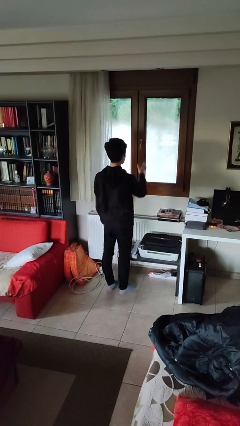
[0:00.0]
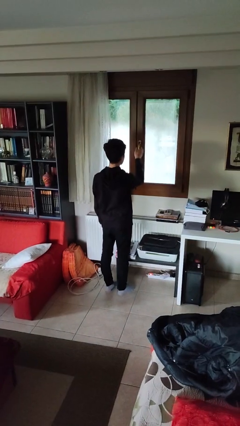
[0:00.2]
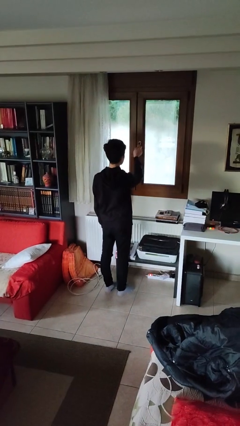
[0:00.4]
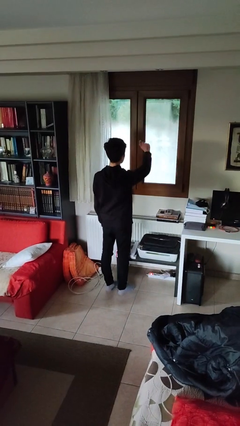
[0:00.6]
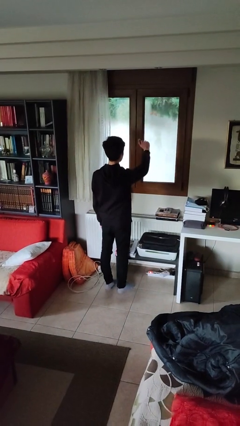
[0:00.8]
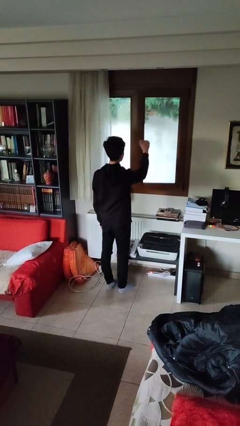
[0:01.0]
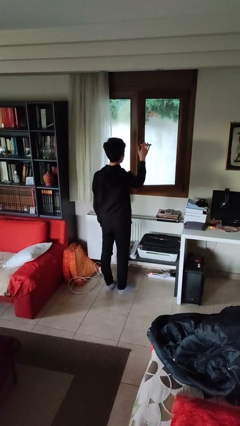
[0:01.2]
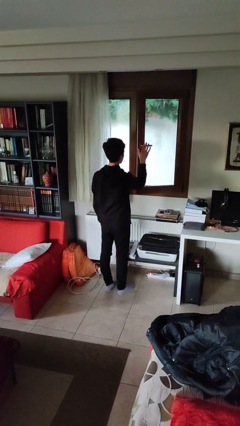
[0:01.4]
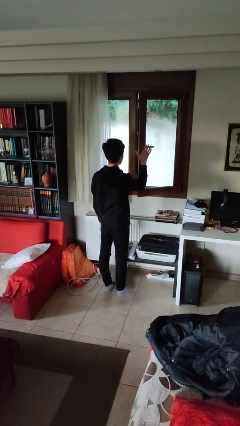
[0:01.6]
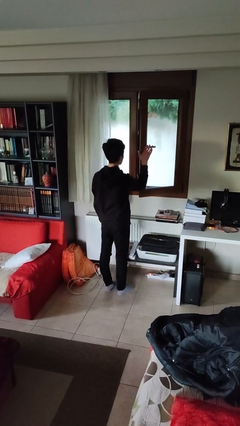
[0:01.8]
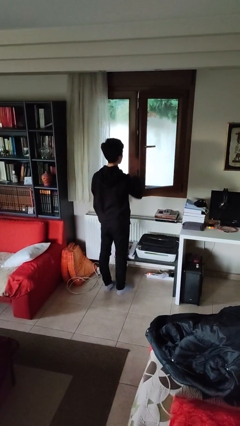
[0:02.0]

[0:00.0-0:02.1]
person opens home window

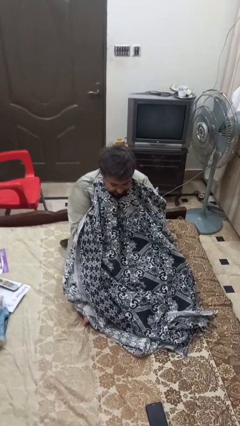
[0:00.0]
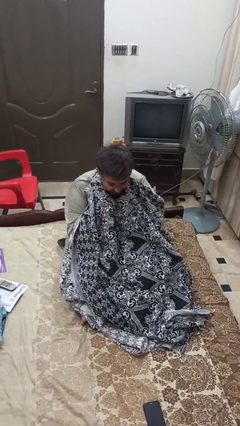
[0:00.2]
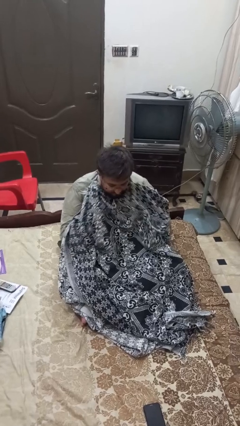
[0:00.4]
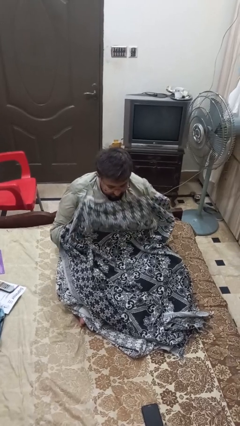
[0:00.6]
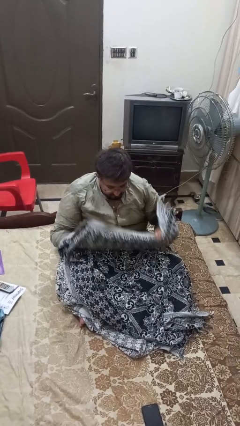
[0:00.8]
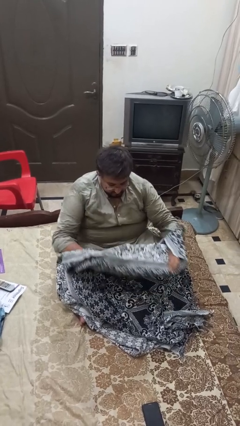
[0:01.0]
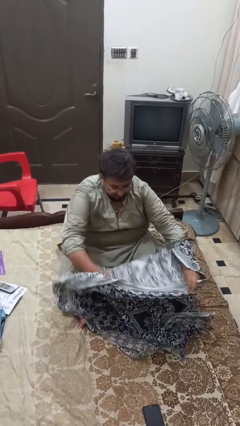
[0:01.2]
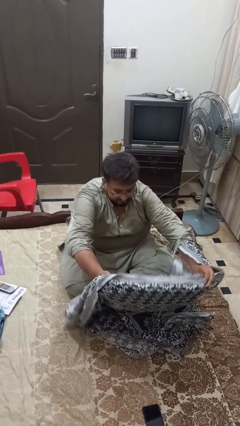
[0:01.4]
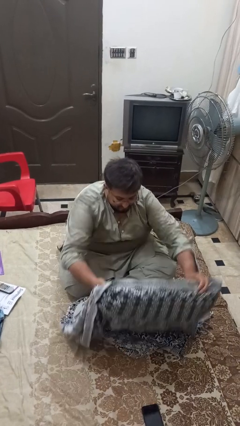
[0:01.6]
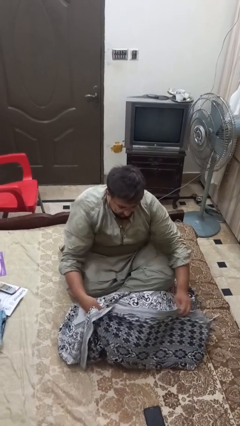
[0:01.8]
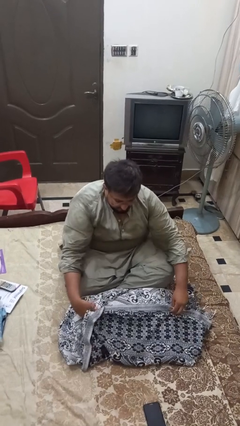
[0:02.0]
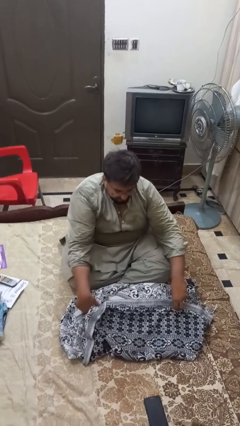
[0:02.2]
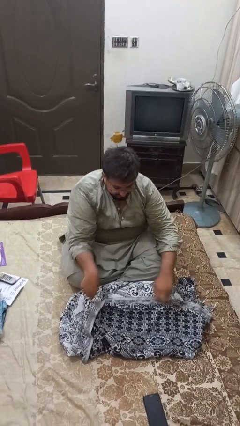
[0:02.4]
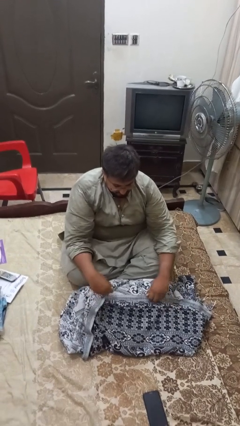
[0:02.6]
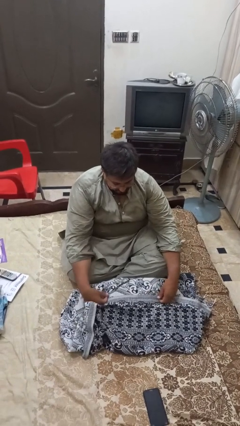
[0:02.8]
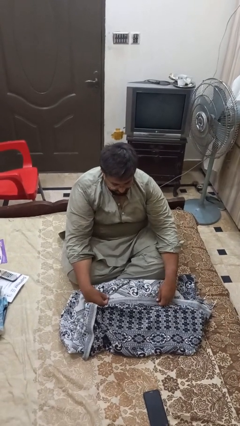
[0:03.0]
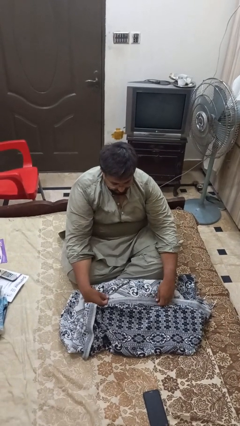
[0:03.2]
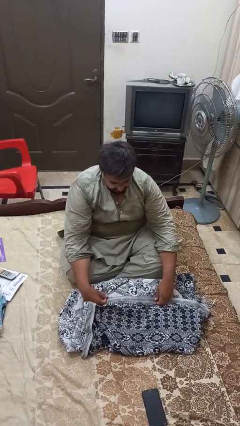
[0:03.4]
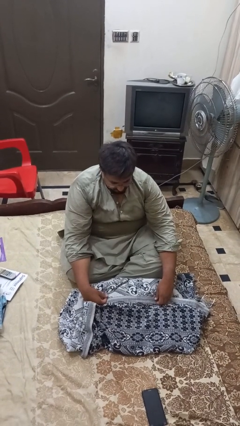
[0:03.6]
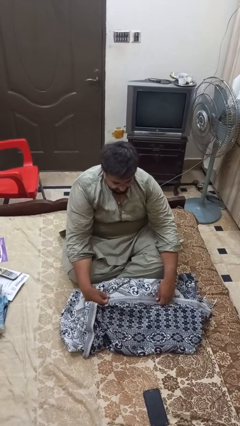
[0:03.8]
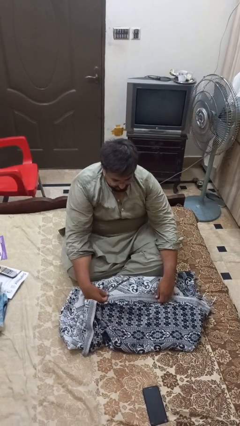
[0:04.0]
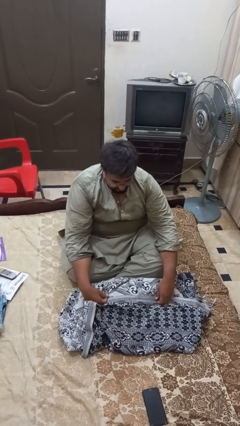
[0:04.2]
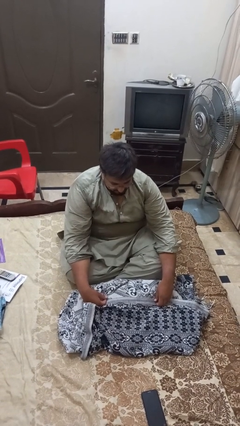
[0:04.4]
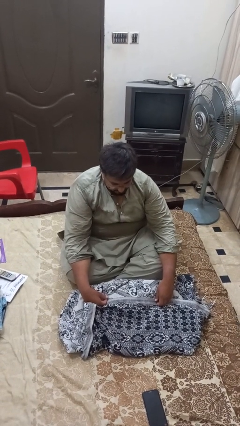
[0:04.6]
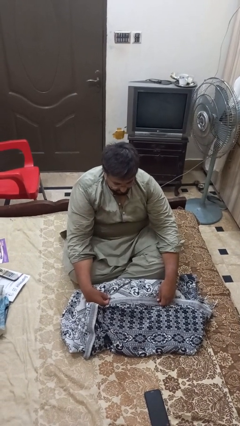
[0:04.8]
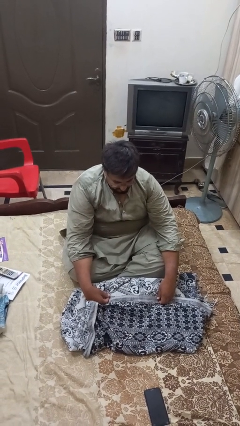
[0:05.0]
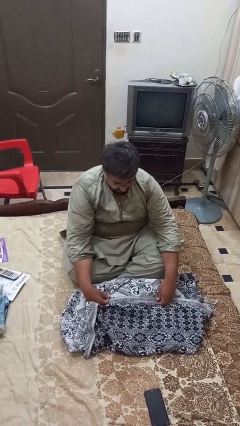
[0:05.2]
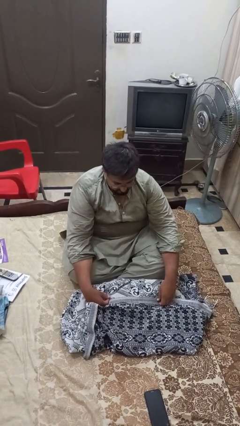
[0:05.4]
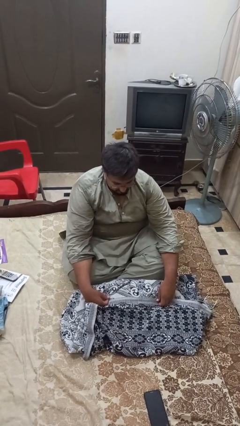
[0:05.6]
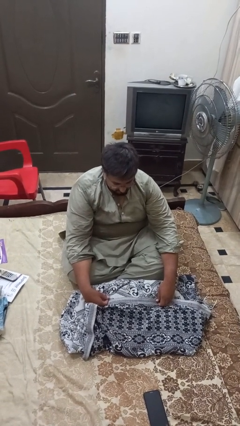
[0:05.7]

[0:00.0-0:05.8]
person uncovers with blanket

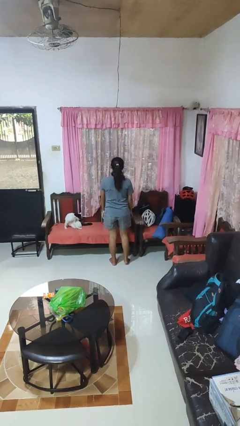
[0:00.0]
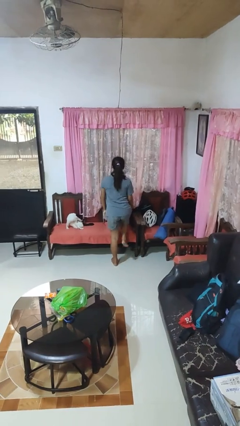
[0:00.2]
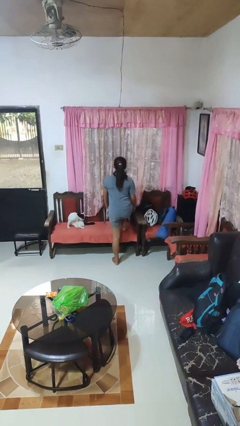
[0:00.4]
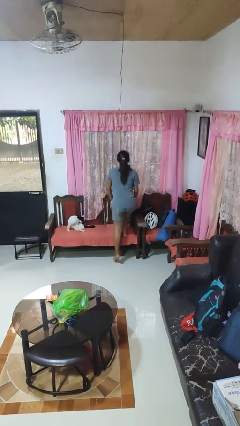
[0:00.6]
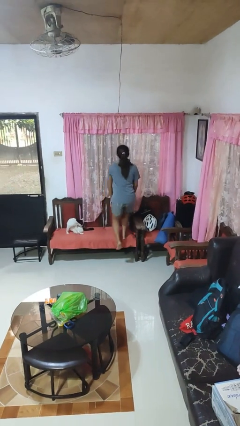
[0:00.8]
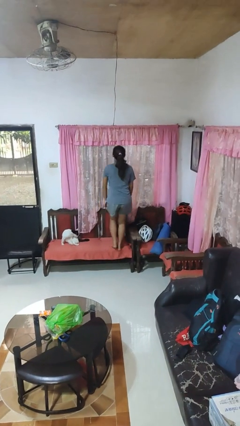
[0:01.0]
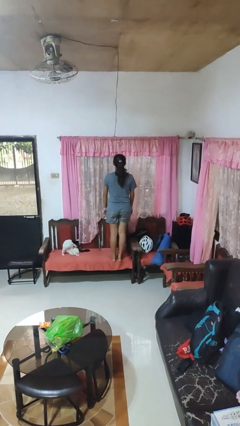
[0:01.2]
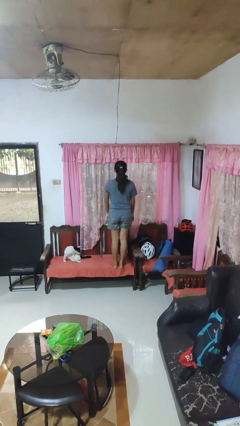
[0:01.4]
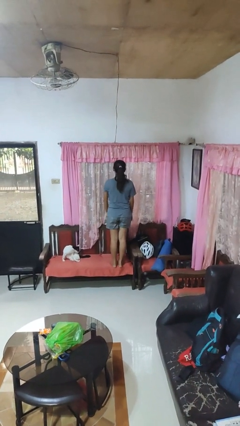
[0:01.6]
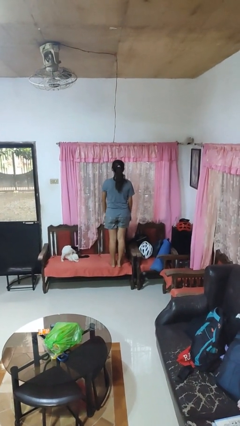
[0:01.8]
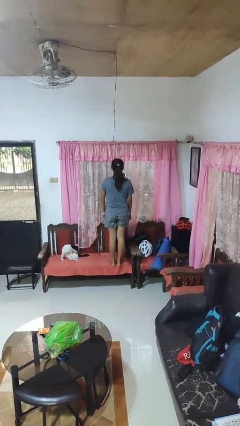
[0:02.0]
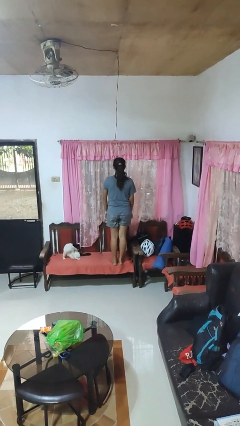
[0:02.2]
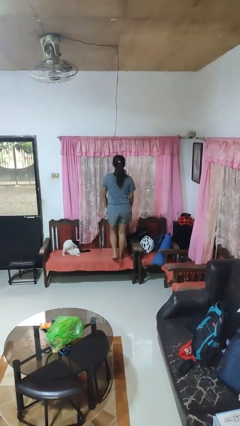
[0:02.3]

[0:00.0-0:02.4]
person climbs on chair

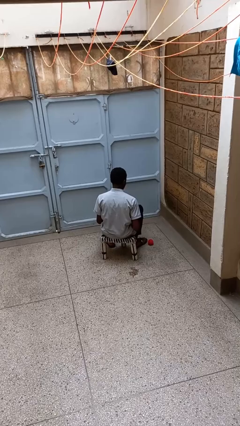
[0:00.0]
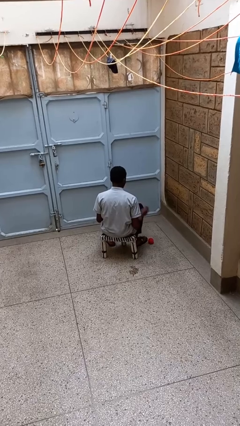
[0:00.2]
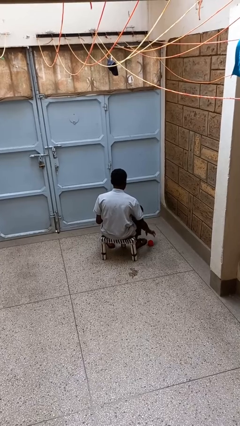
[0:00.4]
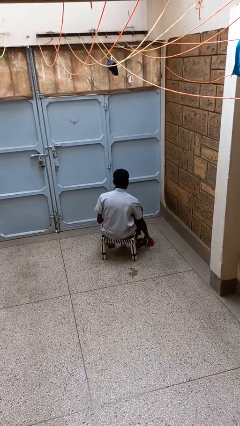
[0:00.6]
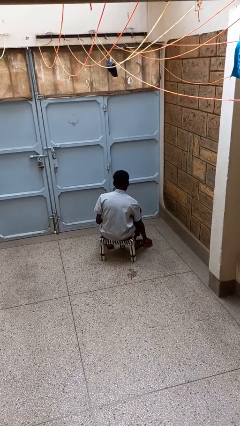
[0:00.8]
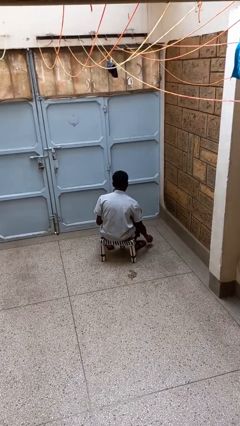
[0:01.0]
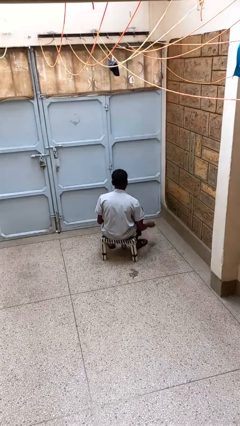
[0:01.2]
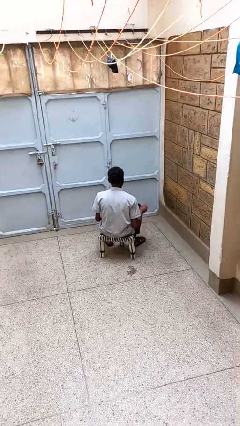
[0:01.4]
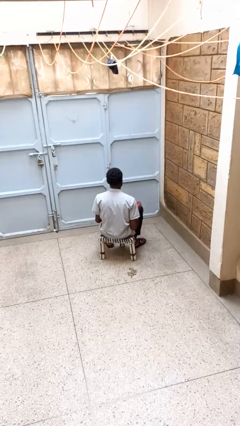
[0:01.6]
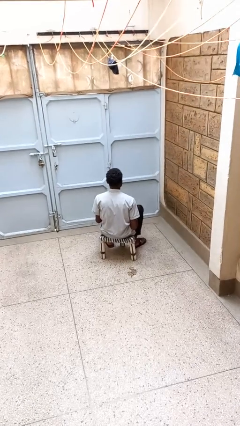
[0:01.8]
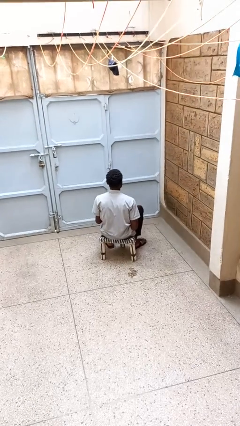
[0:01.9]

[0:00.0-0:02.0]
person picks up object from floor

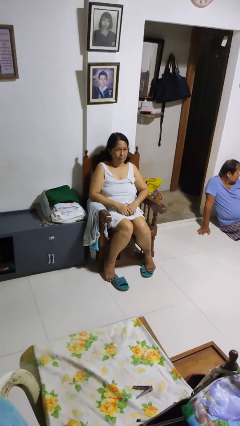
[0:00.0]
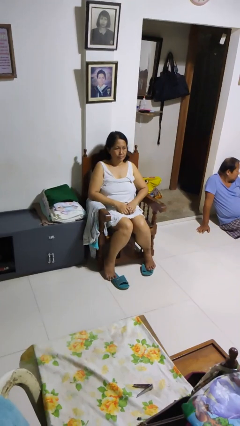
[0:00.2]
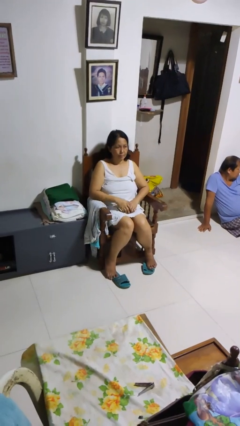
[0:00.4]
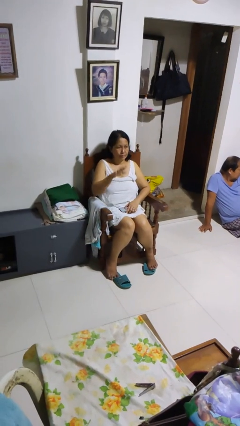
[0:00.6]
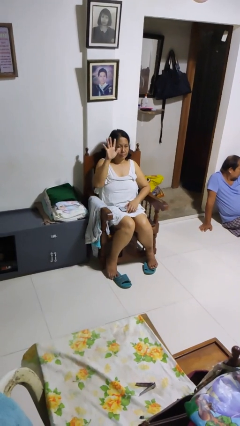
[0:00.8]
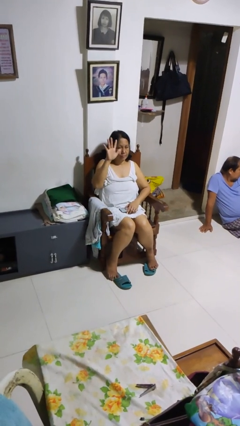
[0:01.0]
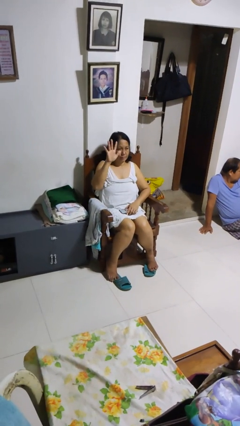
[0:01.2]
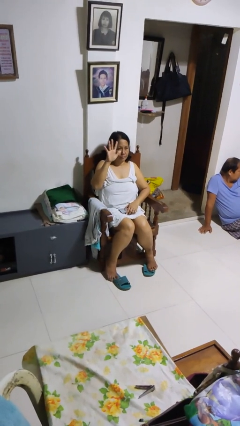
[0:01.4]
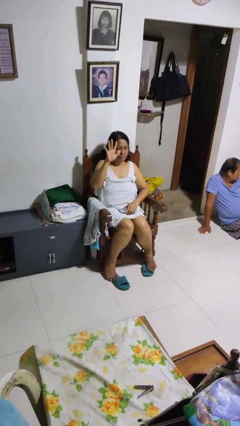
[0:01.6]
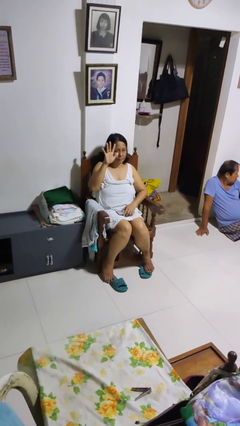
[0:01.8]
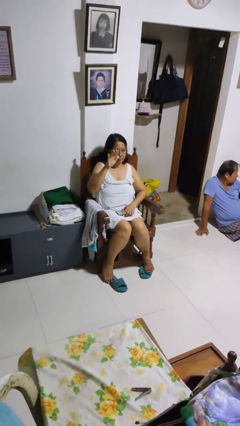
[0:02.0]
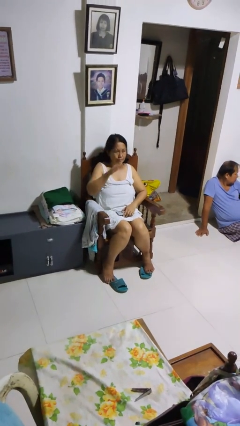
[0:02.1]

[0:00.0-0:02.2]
person gestures number five

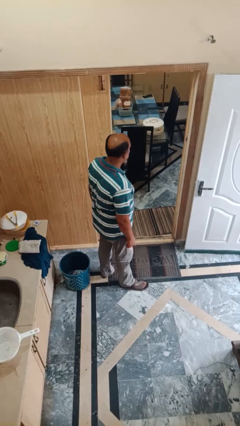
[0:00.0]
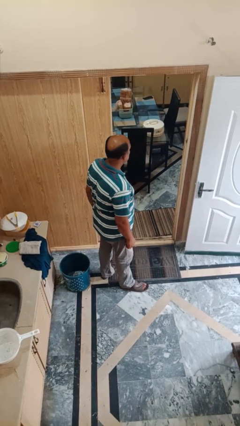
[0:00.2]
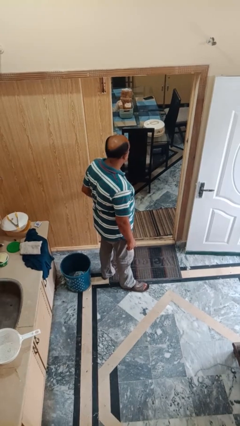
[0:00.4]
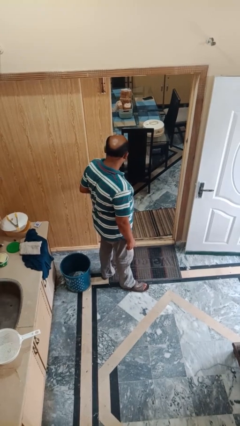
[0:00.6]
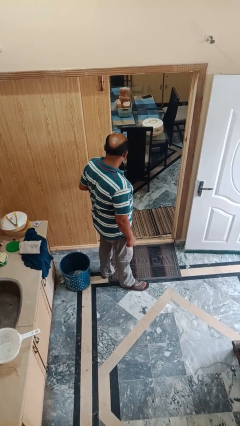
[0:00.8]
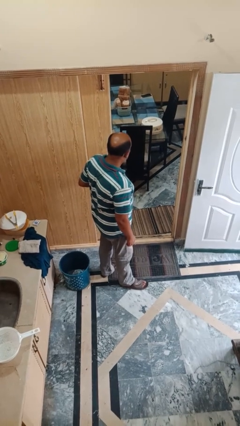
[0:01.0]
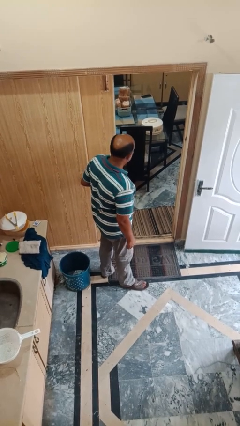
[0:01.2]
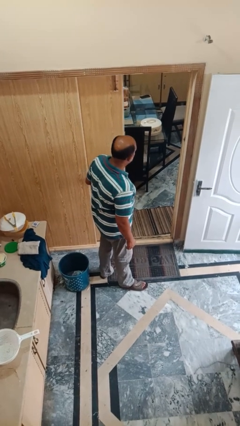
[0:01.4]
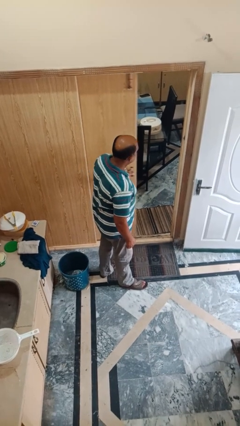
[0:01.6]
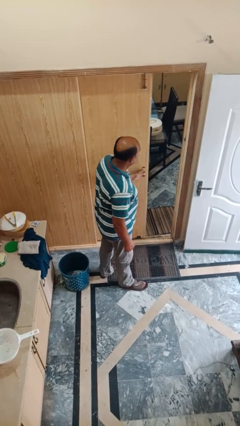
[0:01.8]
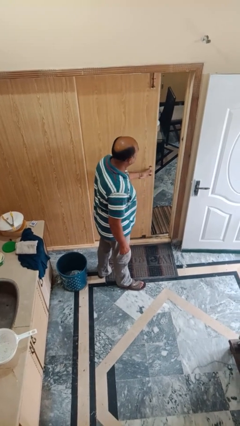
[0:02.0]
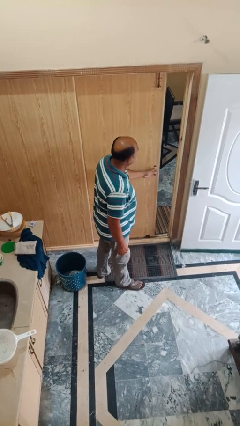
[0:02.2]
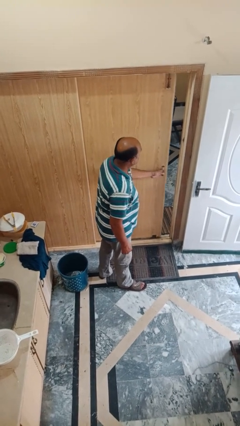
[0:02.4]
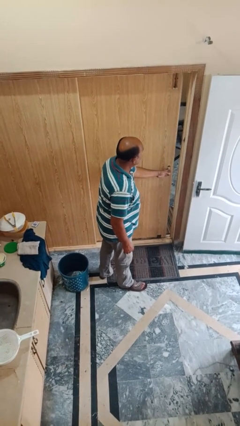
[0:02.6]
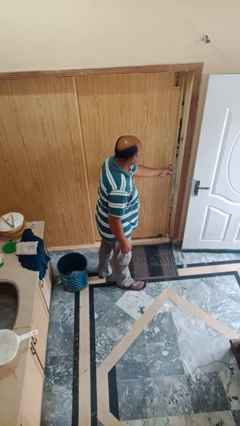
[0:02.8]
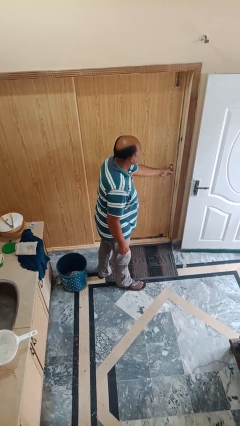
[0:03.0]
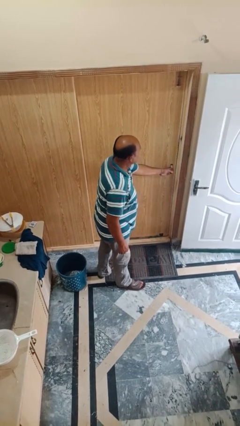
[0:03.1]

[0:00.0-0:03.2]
person closes sliding door
